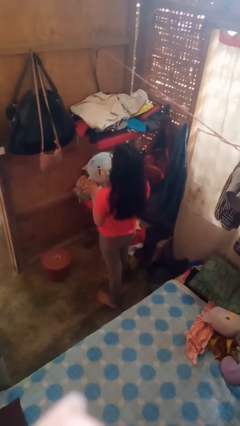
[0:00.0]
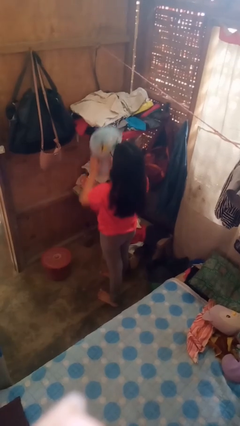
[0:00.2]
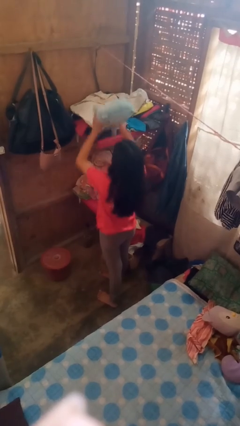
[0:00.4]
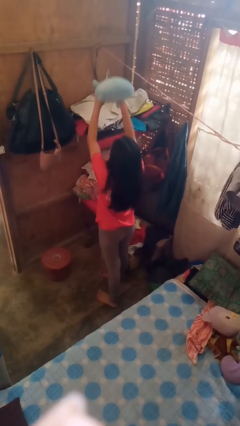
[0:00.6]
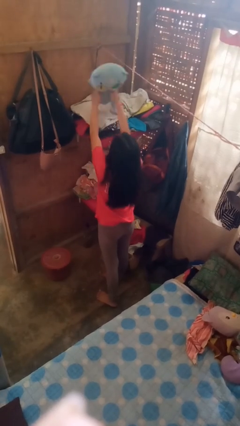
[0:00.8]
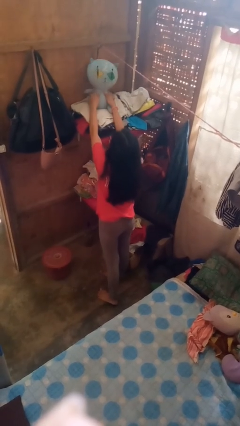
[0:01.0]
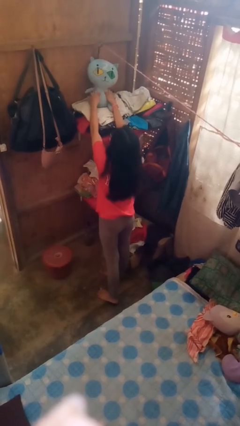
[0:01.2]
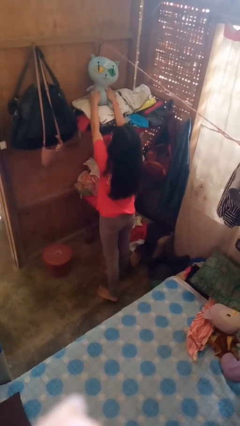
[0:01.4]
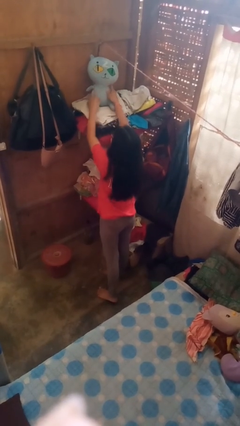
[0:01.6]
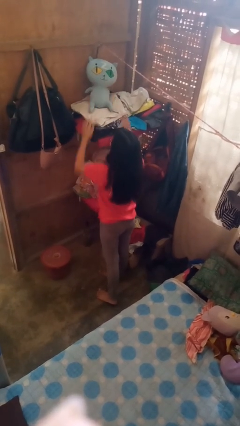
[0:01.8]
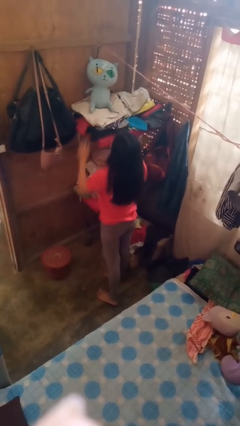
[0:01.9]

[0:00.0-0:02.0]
person puts down object on shelf

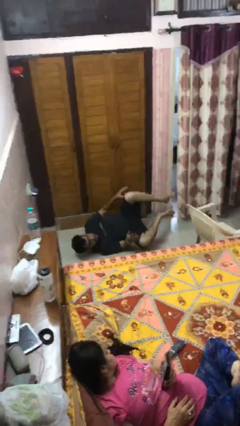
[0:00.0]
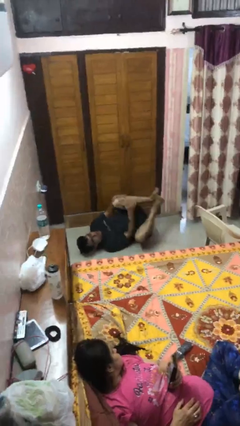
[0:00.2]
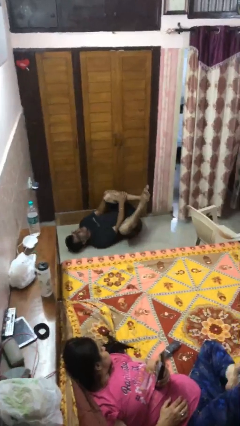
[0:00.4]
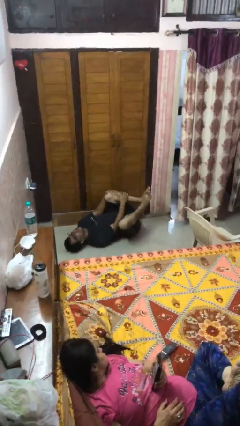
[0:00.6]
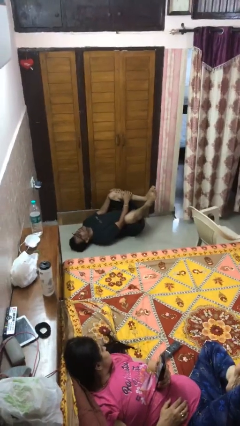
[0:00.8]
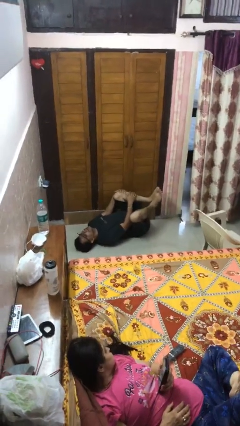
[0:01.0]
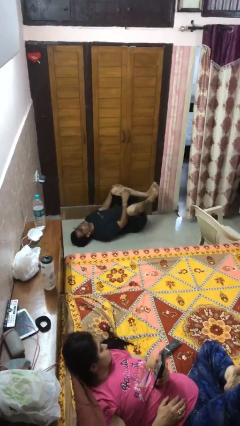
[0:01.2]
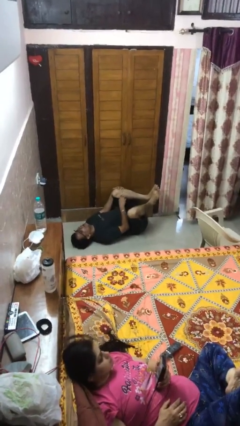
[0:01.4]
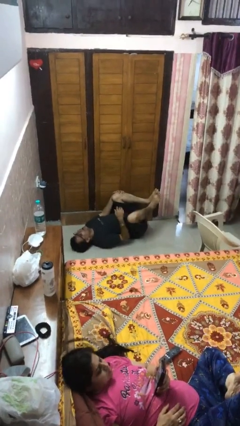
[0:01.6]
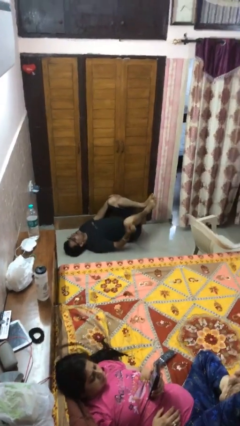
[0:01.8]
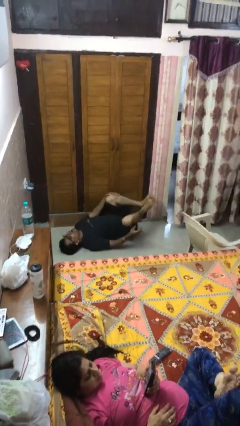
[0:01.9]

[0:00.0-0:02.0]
person lies down on floor

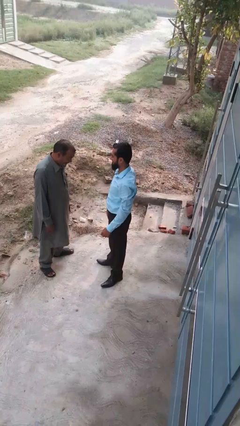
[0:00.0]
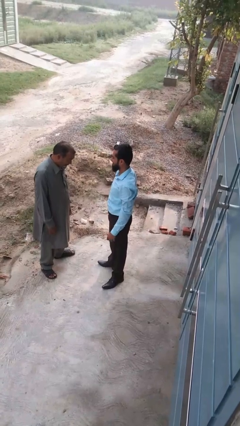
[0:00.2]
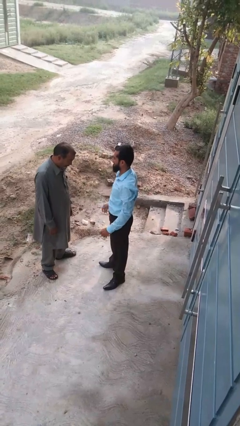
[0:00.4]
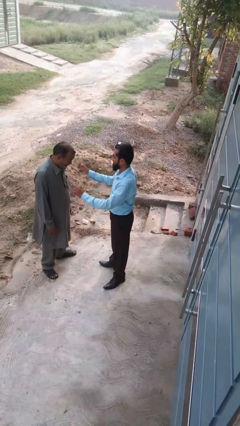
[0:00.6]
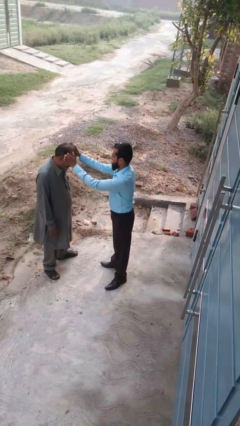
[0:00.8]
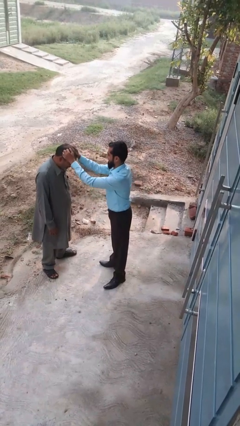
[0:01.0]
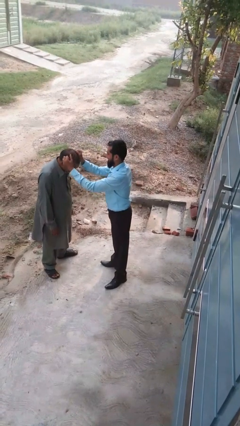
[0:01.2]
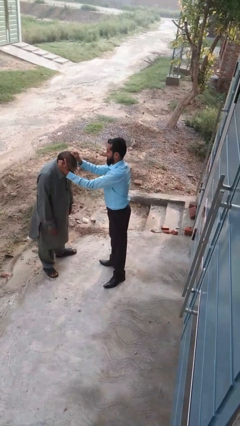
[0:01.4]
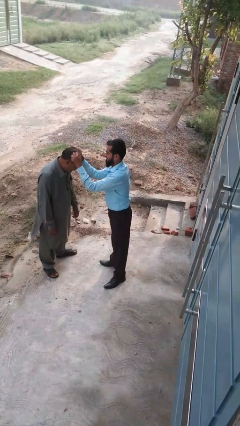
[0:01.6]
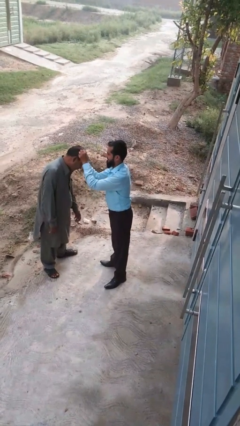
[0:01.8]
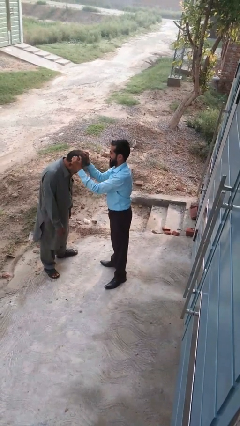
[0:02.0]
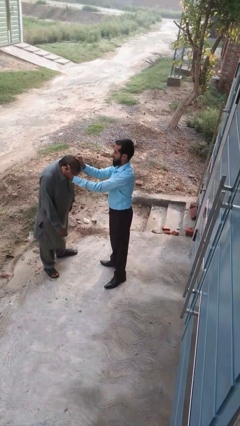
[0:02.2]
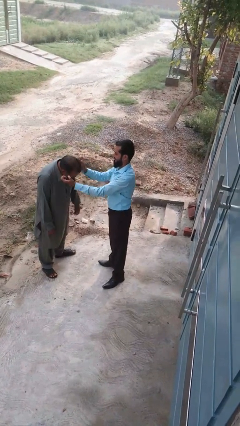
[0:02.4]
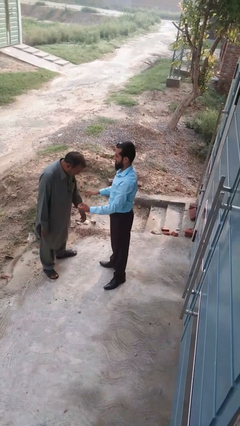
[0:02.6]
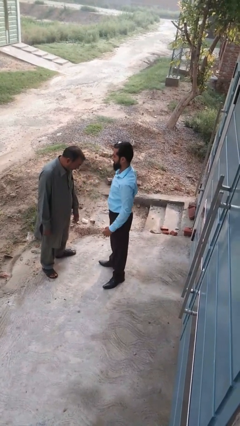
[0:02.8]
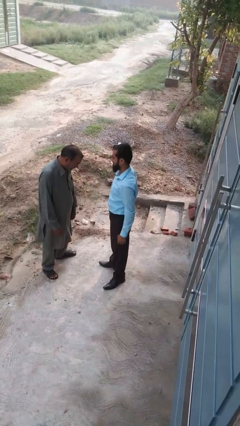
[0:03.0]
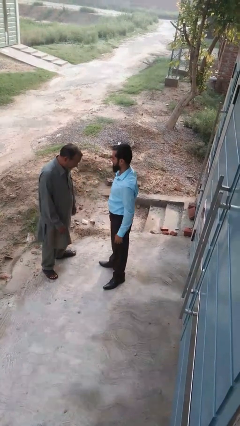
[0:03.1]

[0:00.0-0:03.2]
person grabs person by hair

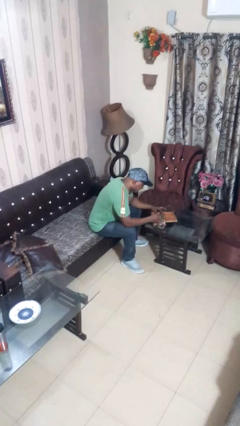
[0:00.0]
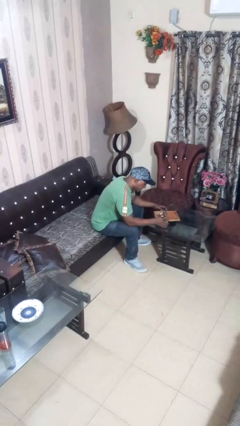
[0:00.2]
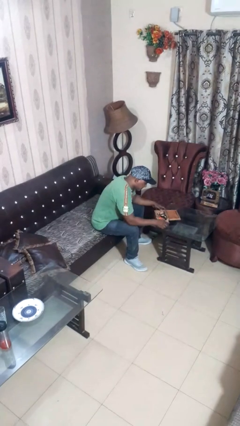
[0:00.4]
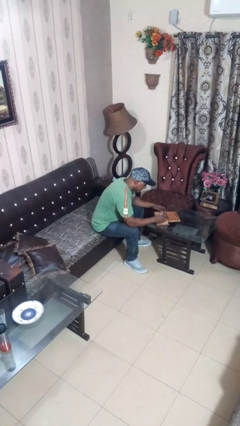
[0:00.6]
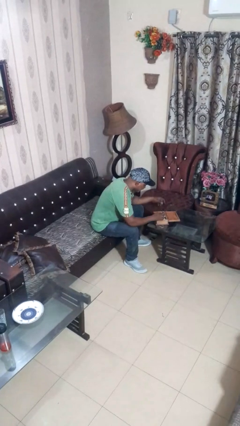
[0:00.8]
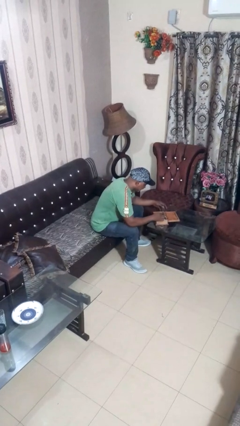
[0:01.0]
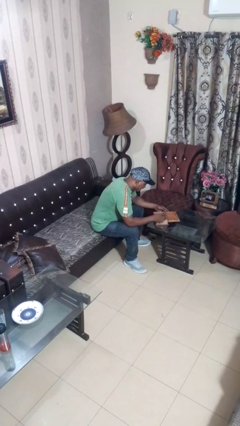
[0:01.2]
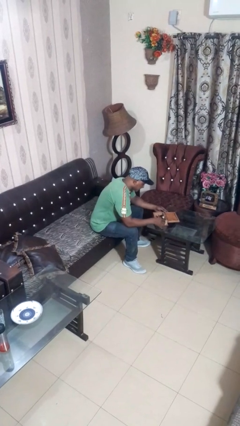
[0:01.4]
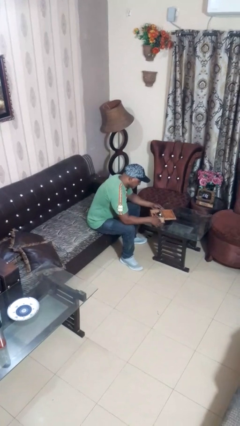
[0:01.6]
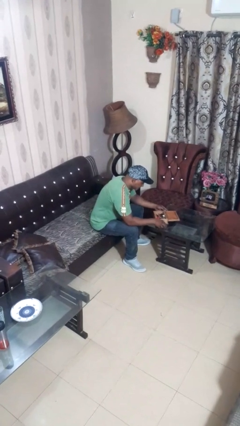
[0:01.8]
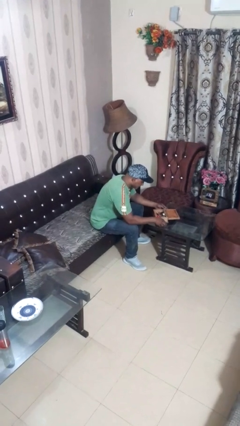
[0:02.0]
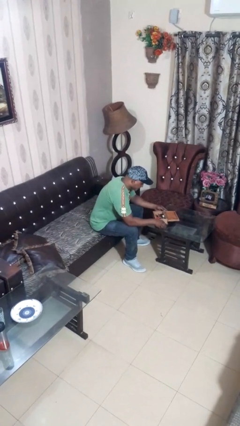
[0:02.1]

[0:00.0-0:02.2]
person searches jewelry box

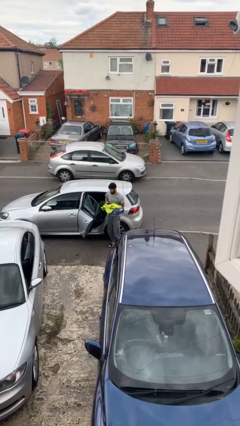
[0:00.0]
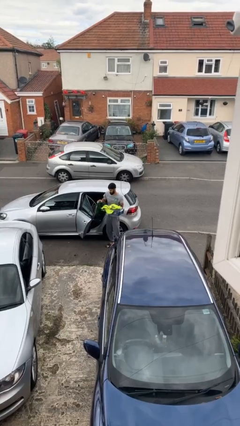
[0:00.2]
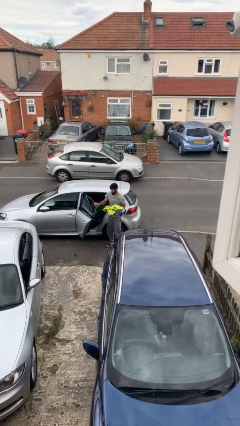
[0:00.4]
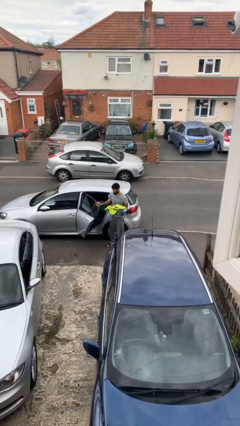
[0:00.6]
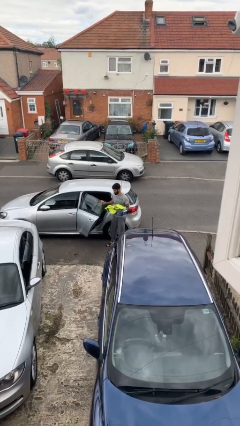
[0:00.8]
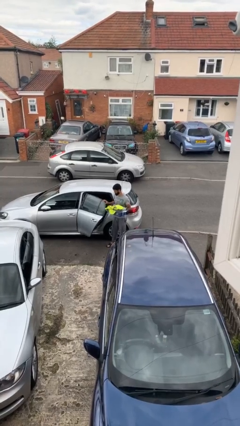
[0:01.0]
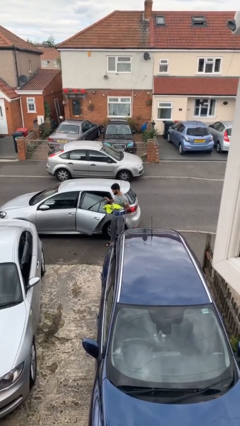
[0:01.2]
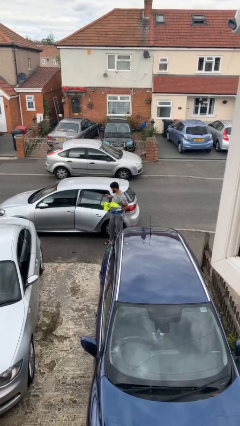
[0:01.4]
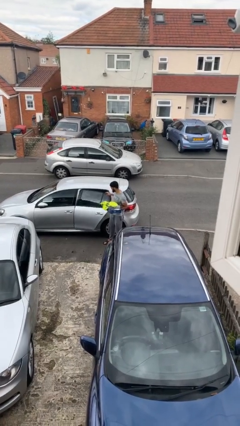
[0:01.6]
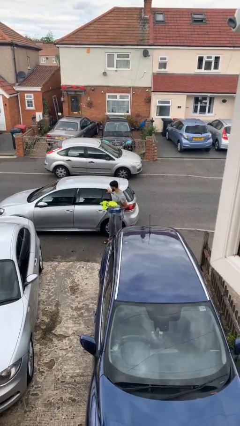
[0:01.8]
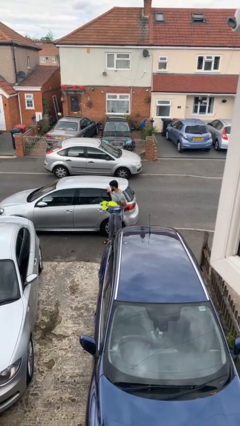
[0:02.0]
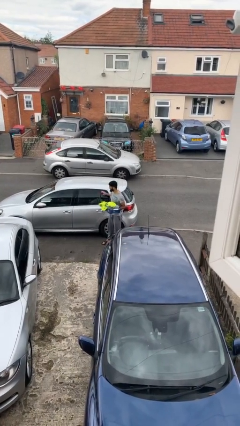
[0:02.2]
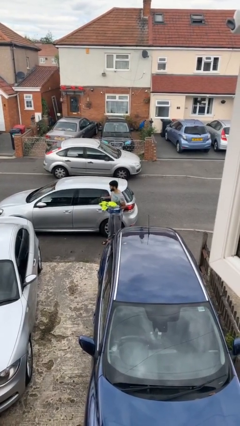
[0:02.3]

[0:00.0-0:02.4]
person closes car door

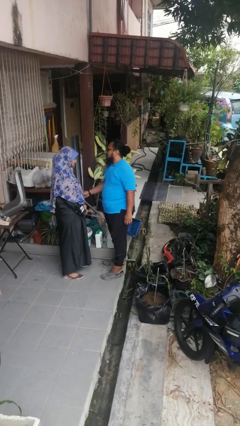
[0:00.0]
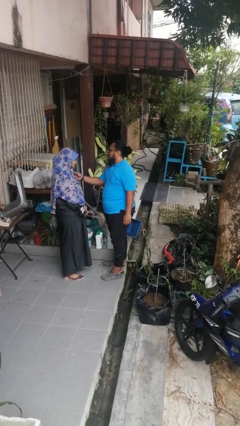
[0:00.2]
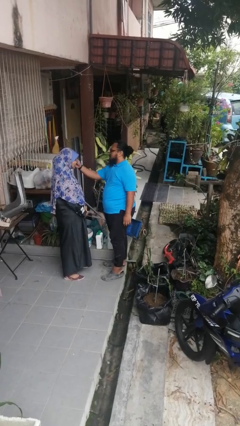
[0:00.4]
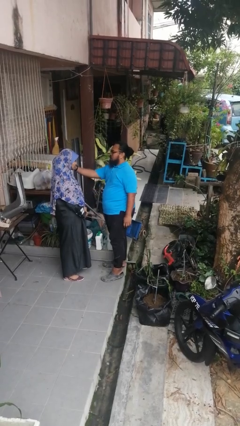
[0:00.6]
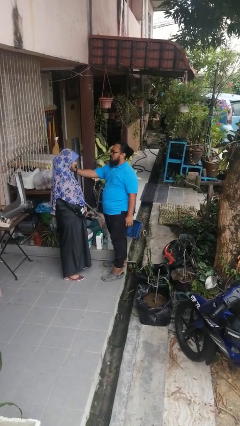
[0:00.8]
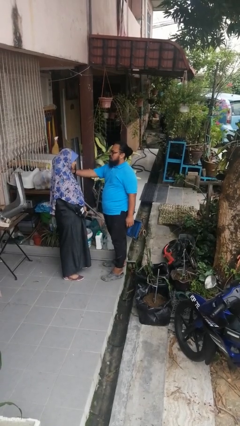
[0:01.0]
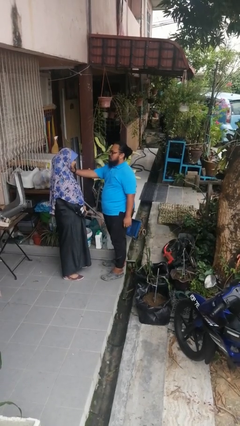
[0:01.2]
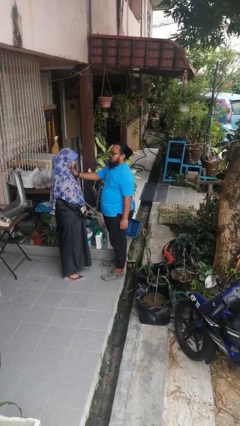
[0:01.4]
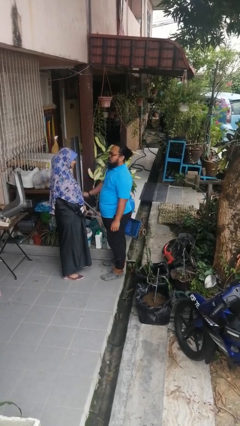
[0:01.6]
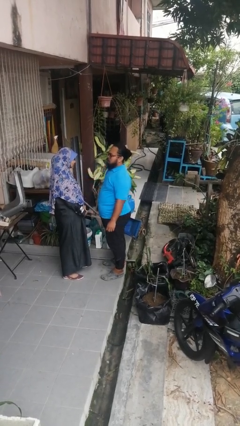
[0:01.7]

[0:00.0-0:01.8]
person pounds shoulders of person

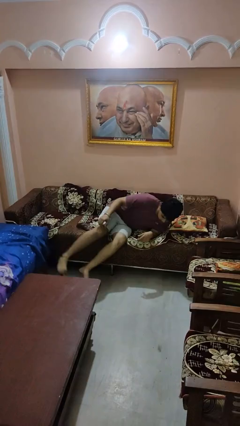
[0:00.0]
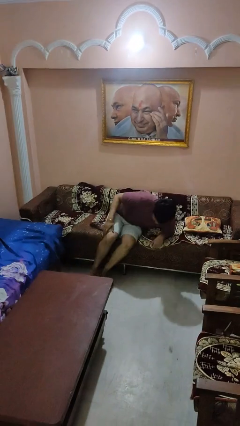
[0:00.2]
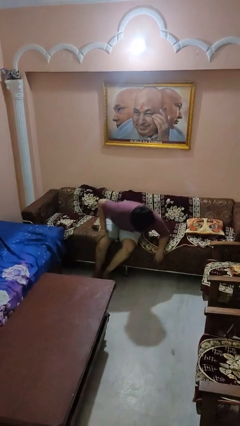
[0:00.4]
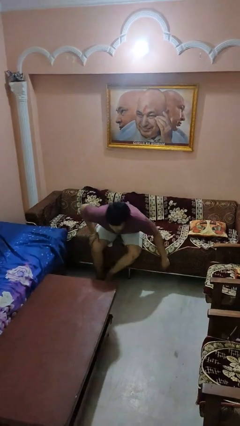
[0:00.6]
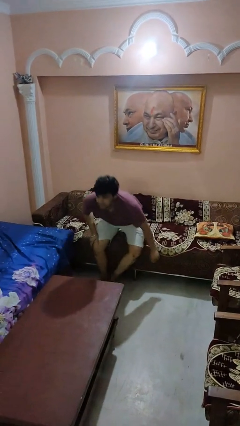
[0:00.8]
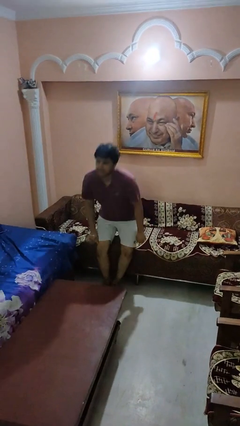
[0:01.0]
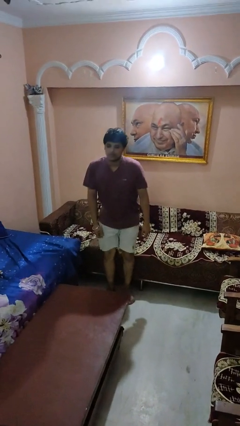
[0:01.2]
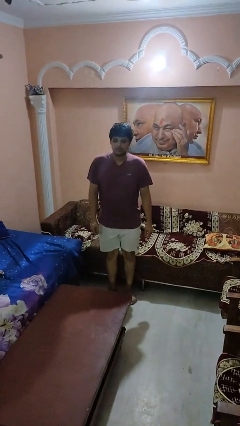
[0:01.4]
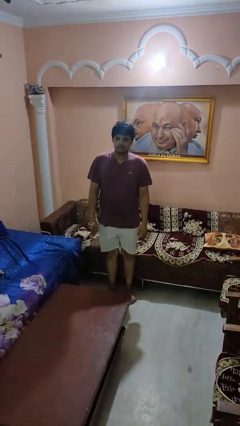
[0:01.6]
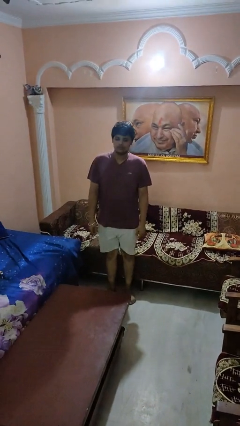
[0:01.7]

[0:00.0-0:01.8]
person stands up

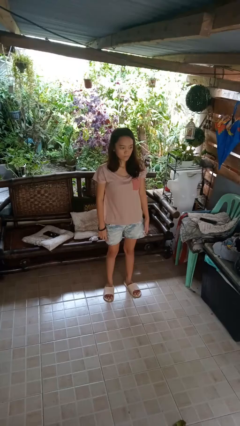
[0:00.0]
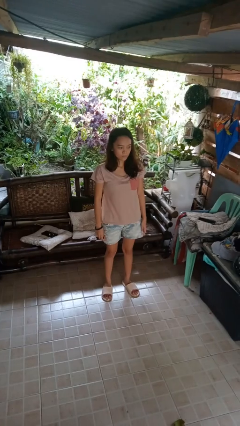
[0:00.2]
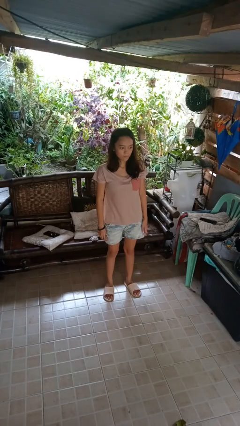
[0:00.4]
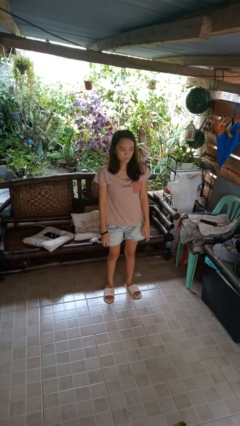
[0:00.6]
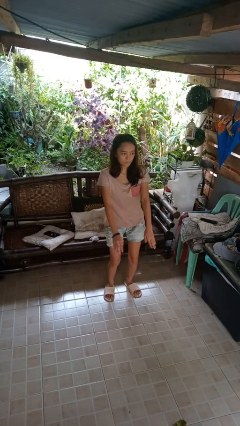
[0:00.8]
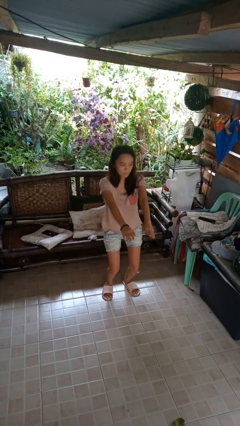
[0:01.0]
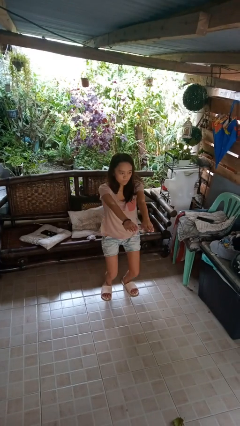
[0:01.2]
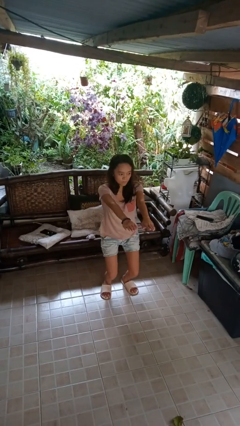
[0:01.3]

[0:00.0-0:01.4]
person squats
